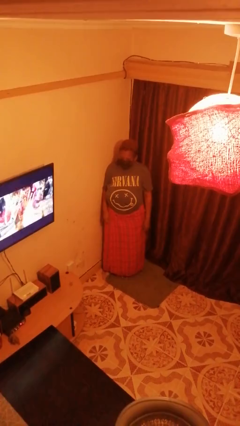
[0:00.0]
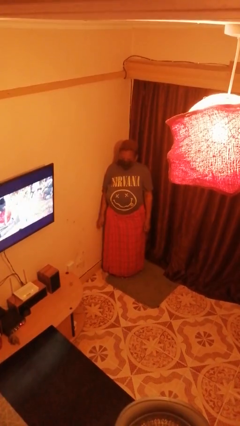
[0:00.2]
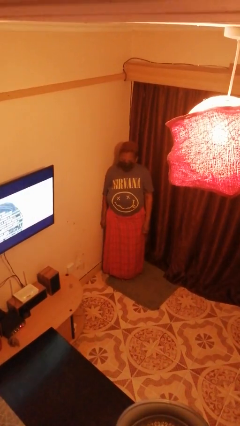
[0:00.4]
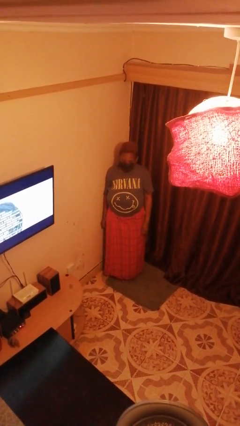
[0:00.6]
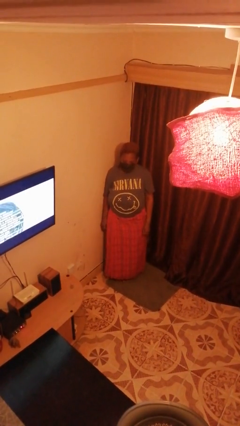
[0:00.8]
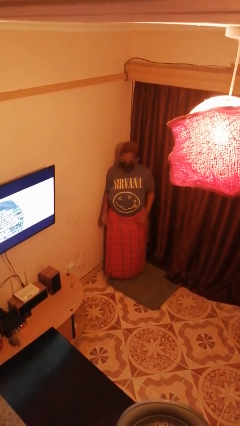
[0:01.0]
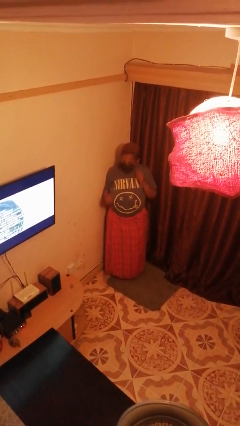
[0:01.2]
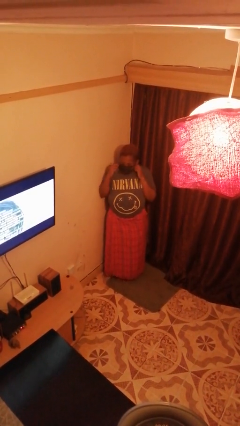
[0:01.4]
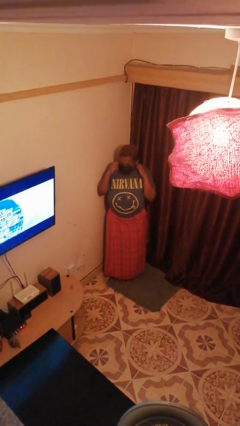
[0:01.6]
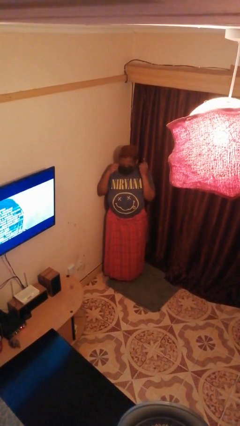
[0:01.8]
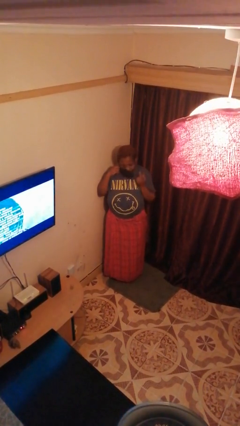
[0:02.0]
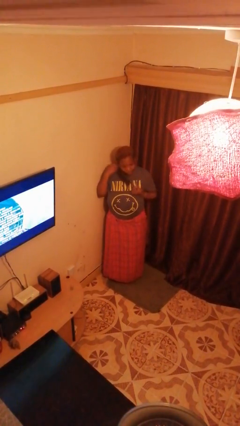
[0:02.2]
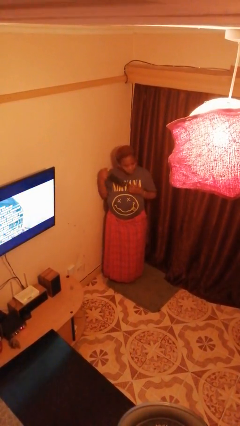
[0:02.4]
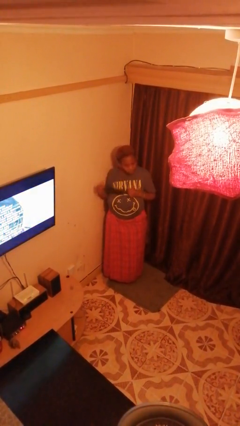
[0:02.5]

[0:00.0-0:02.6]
person takes off facemask

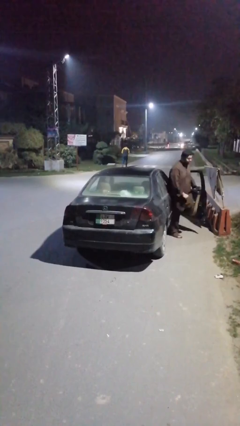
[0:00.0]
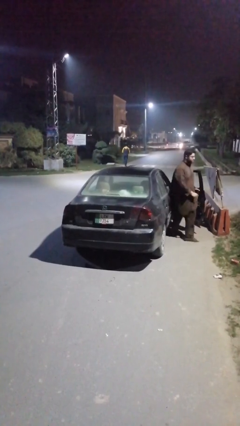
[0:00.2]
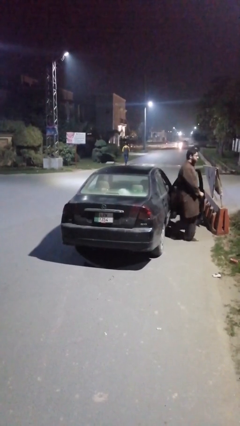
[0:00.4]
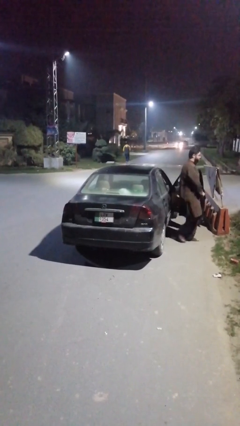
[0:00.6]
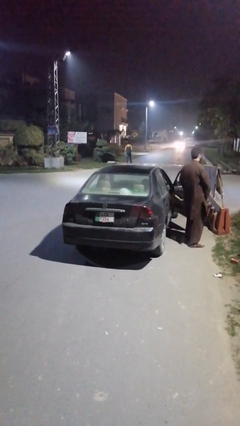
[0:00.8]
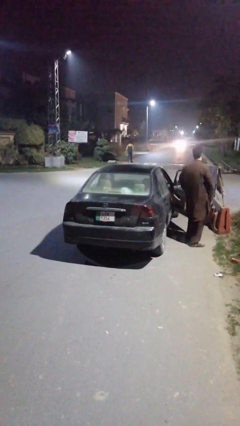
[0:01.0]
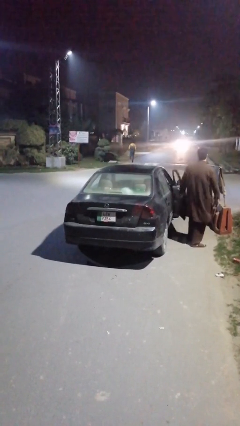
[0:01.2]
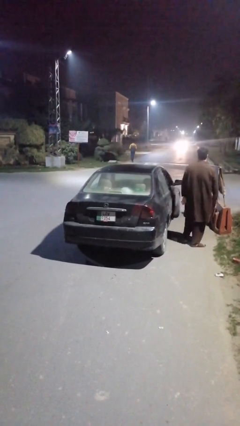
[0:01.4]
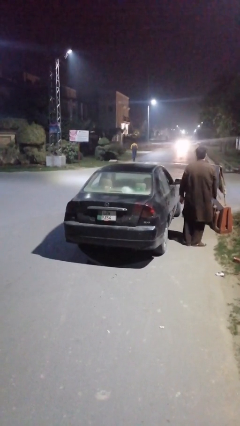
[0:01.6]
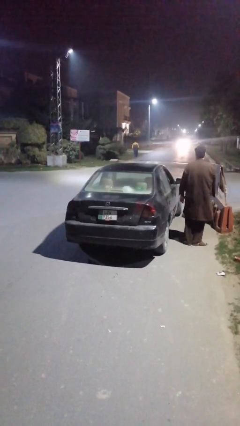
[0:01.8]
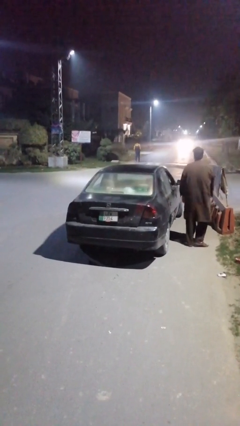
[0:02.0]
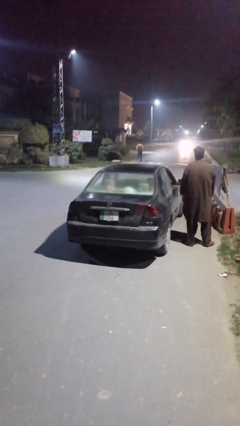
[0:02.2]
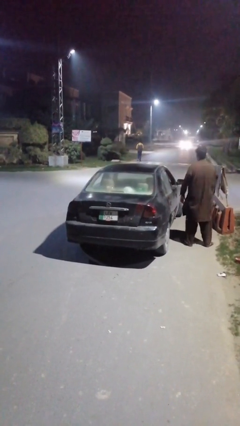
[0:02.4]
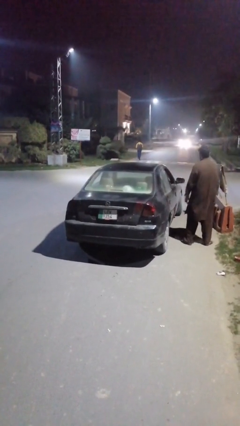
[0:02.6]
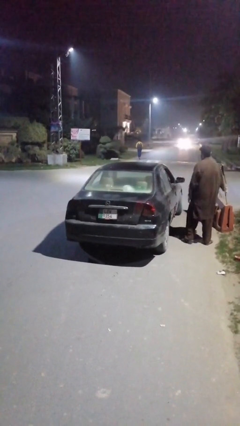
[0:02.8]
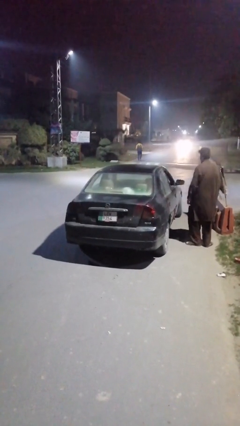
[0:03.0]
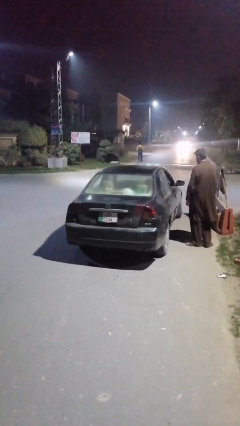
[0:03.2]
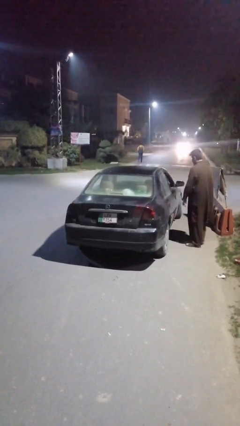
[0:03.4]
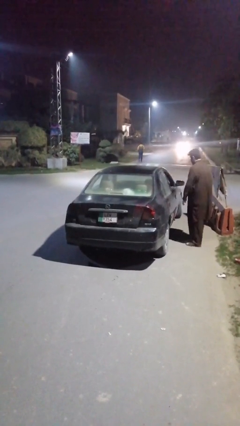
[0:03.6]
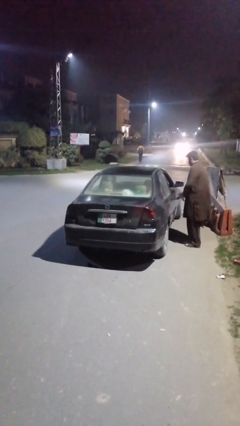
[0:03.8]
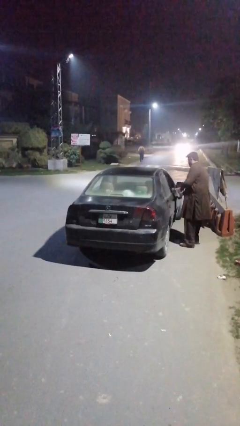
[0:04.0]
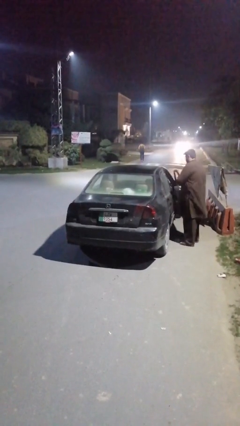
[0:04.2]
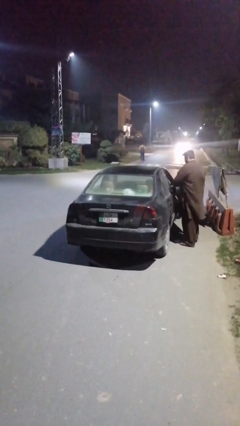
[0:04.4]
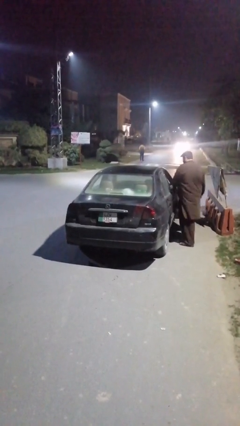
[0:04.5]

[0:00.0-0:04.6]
car drops off person

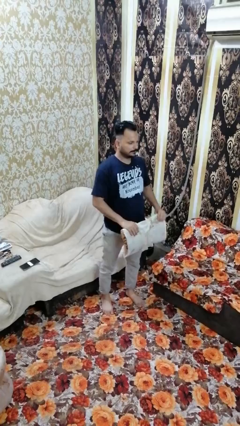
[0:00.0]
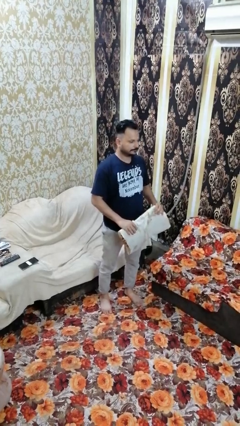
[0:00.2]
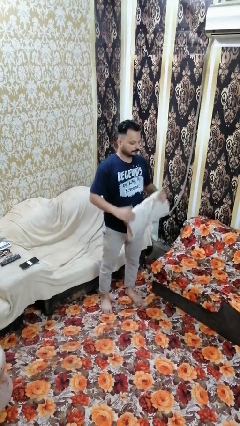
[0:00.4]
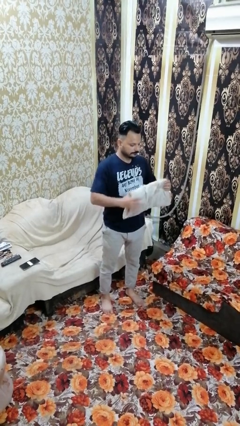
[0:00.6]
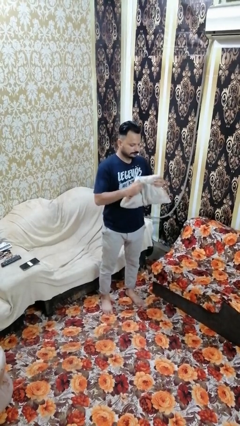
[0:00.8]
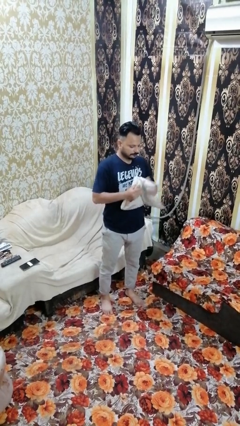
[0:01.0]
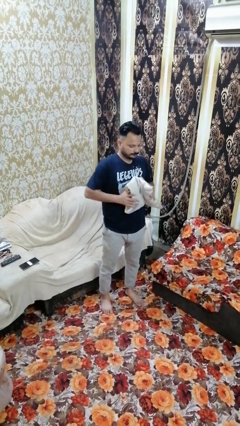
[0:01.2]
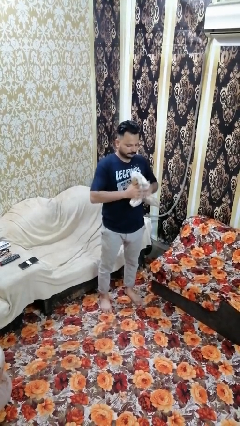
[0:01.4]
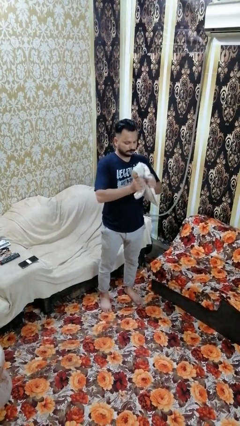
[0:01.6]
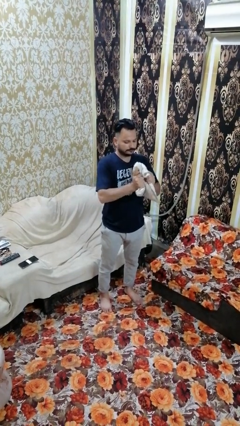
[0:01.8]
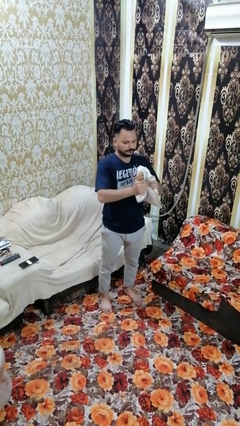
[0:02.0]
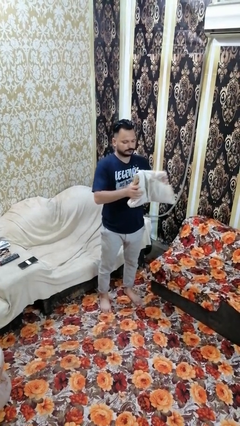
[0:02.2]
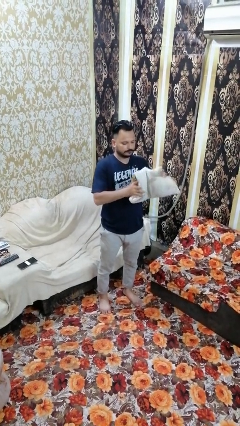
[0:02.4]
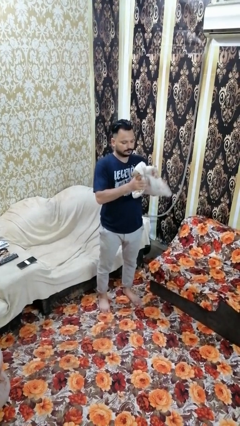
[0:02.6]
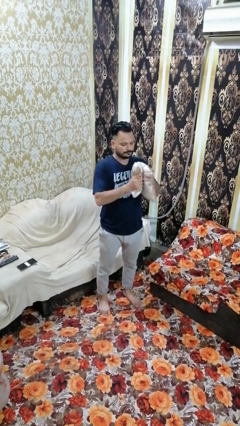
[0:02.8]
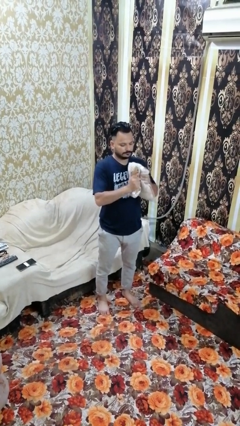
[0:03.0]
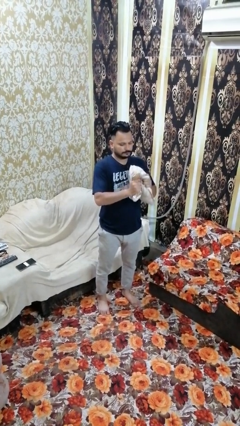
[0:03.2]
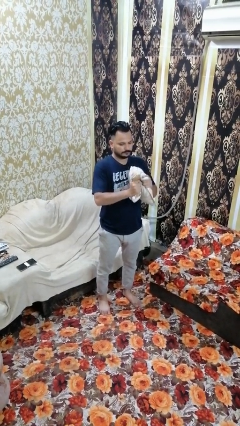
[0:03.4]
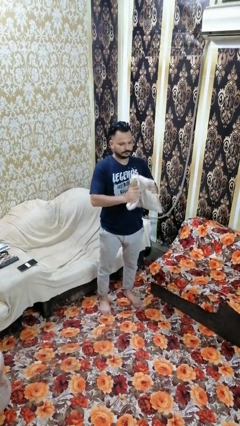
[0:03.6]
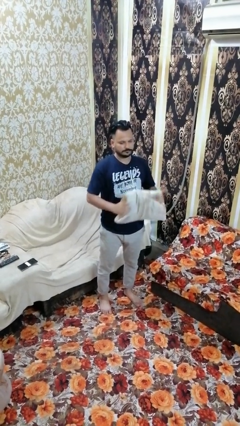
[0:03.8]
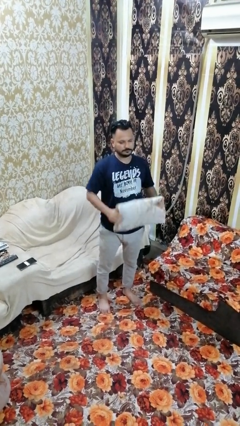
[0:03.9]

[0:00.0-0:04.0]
person squeezes object

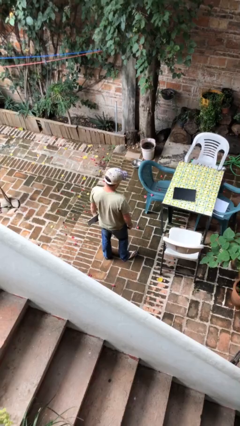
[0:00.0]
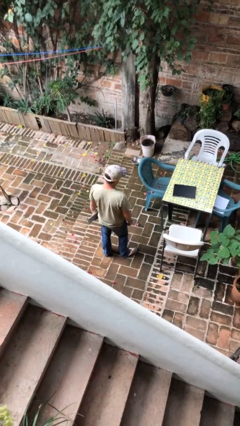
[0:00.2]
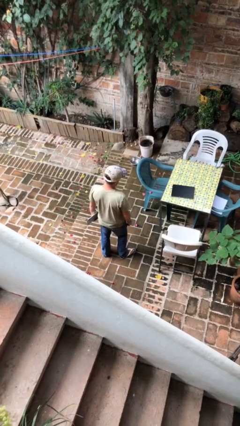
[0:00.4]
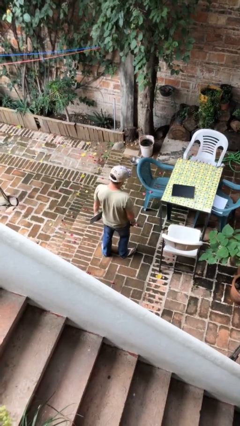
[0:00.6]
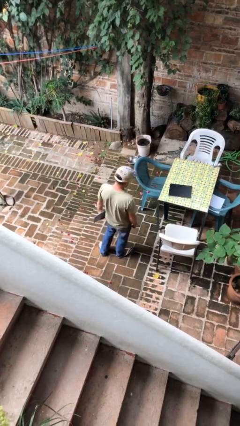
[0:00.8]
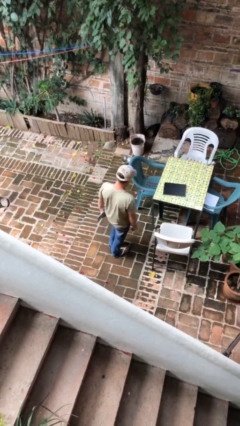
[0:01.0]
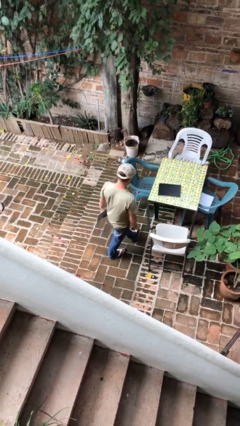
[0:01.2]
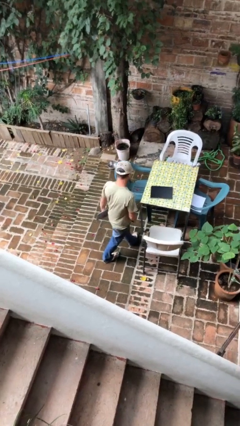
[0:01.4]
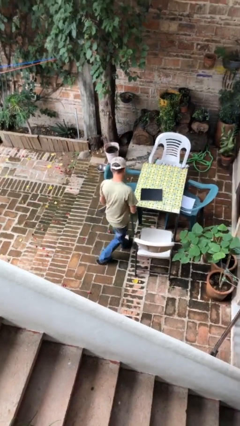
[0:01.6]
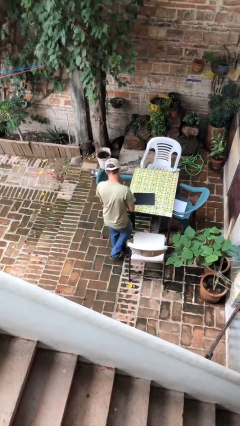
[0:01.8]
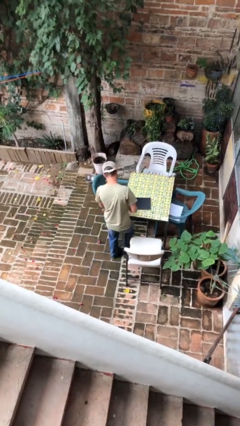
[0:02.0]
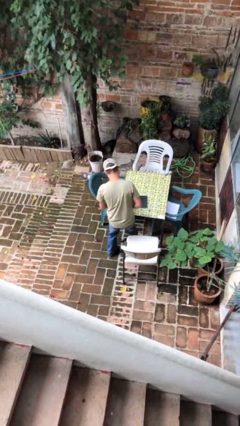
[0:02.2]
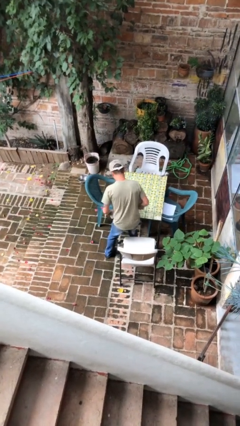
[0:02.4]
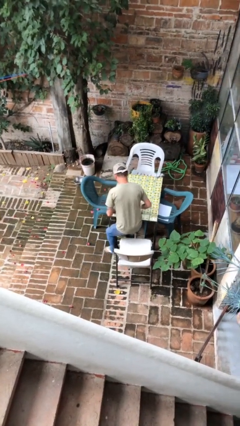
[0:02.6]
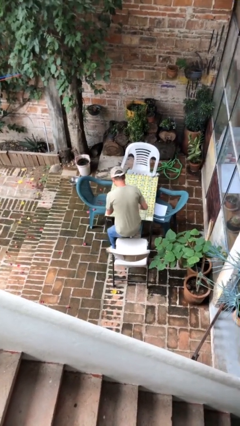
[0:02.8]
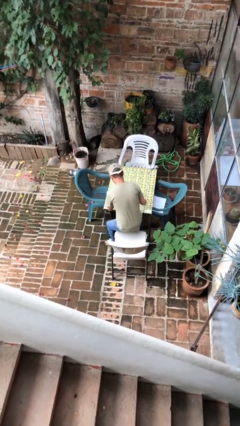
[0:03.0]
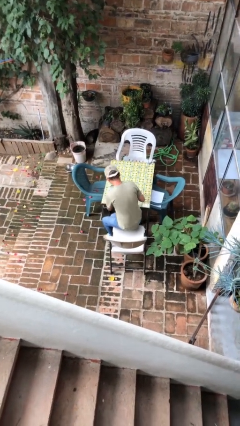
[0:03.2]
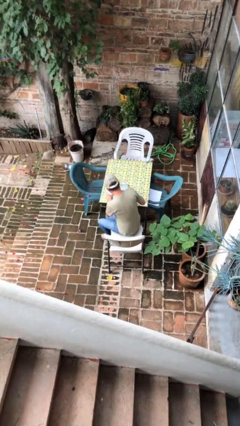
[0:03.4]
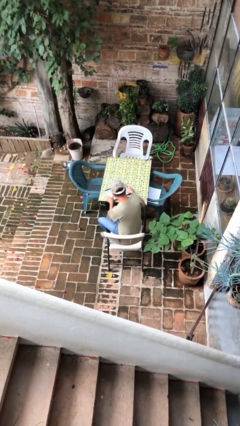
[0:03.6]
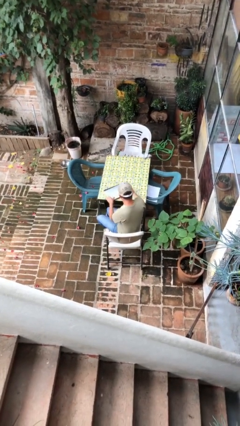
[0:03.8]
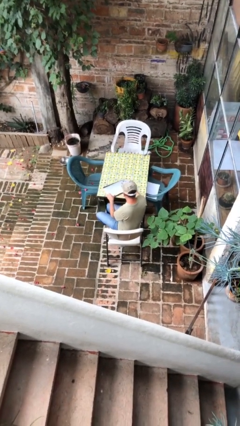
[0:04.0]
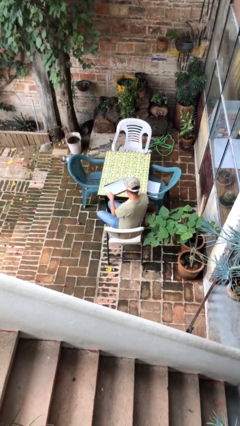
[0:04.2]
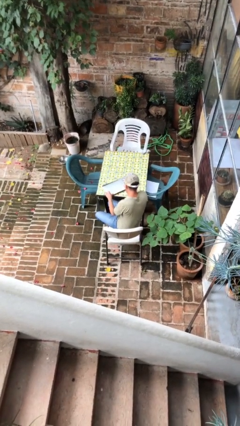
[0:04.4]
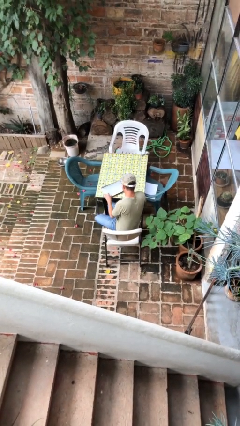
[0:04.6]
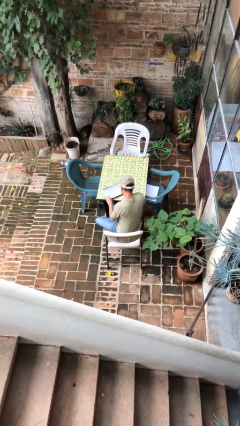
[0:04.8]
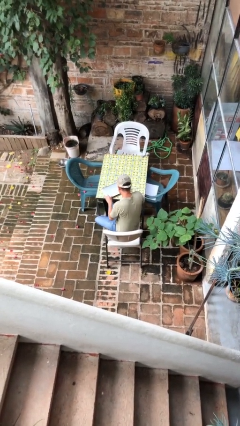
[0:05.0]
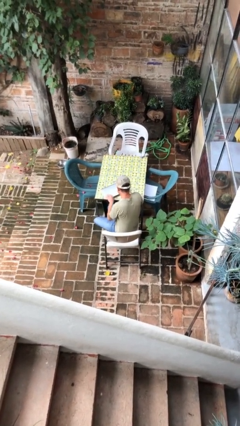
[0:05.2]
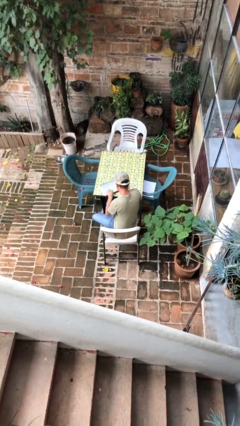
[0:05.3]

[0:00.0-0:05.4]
person sits down

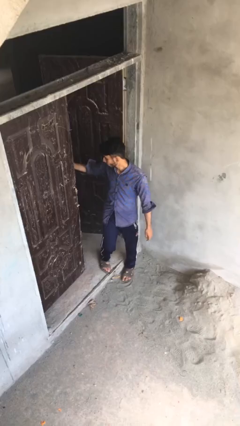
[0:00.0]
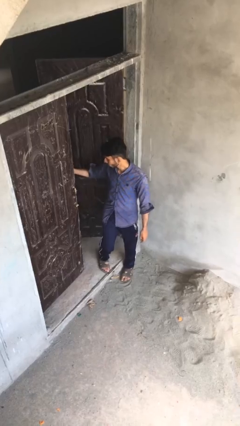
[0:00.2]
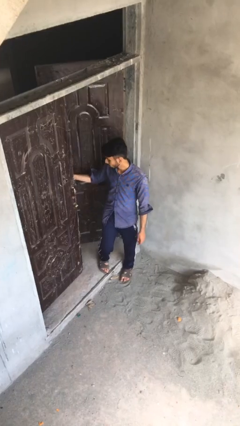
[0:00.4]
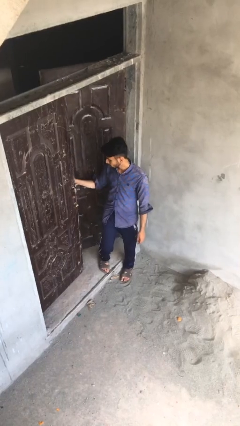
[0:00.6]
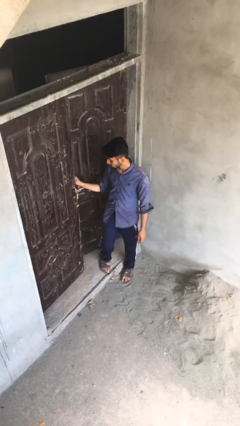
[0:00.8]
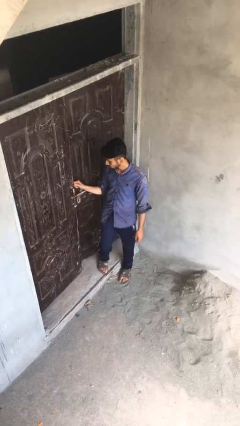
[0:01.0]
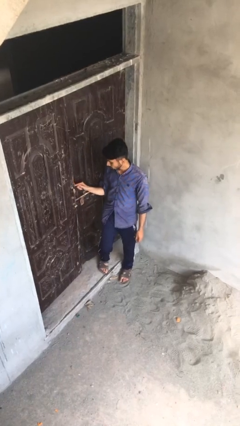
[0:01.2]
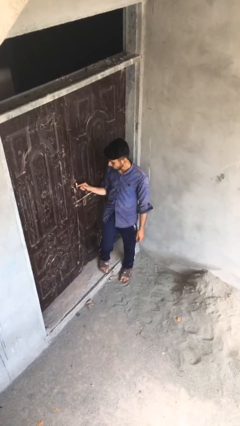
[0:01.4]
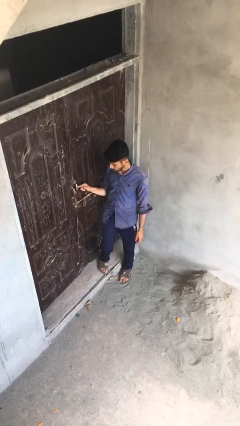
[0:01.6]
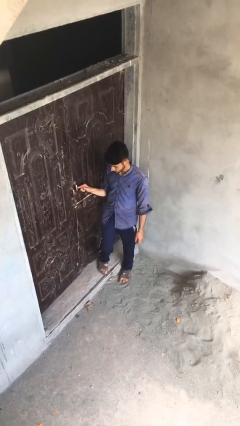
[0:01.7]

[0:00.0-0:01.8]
person closes facility door
